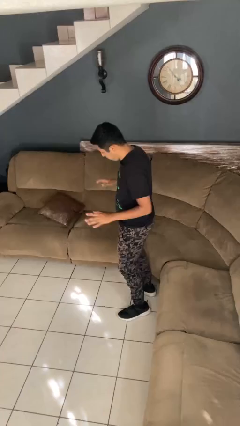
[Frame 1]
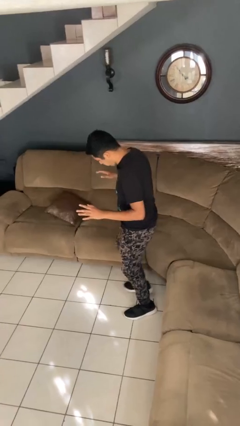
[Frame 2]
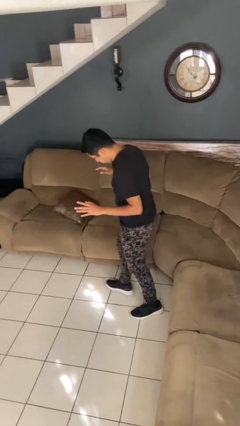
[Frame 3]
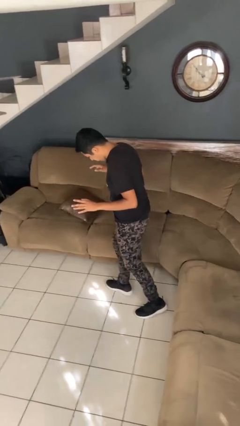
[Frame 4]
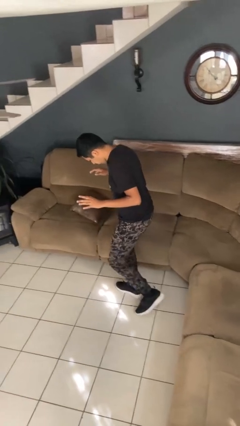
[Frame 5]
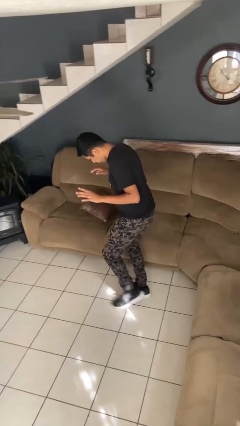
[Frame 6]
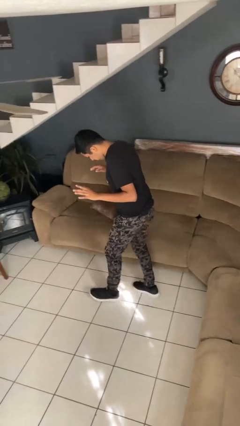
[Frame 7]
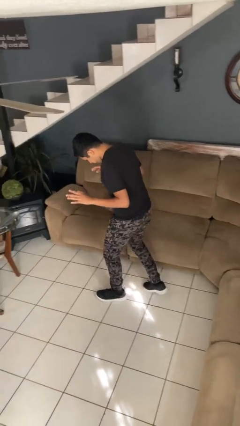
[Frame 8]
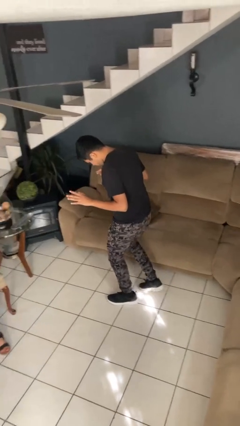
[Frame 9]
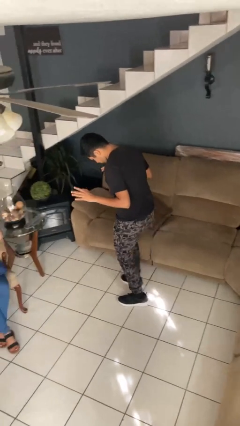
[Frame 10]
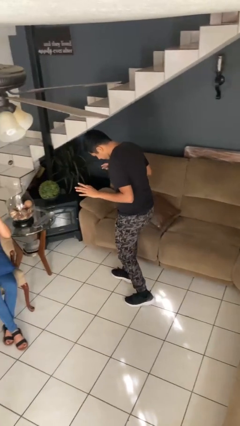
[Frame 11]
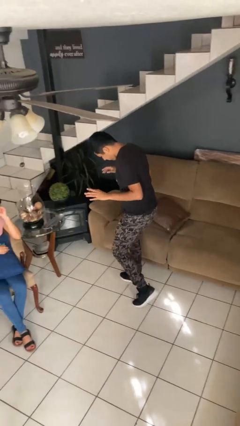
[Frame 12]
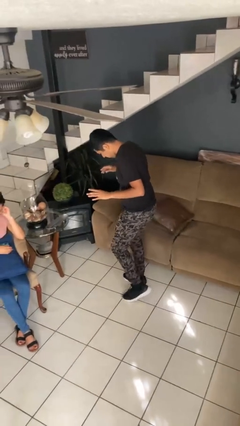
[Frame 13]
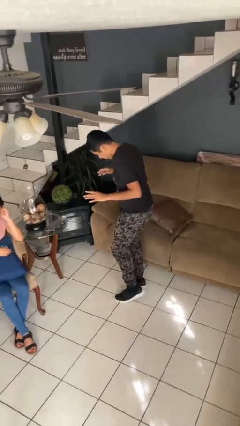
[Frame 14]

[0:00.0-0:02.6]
person walks tiptoe

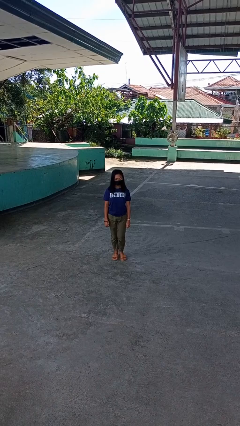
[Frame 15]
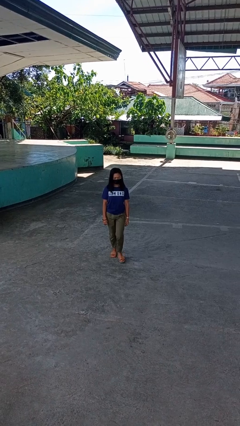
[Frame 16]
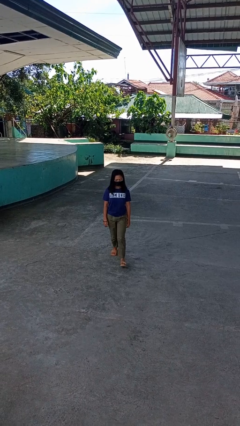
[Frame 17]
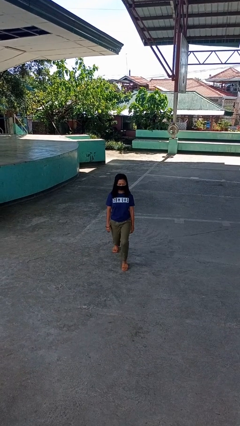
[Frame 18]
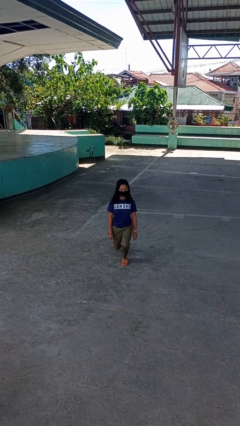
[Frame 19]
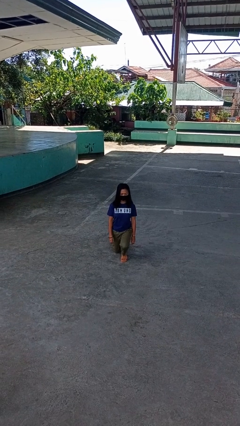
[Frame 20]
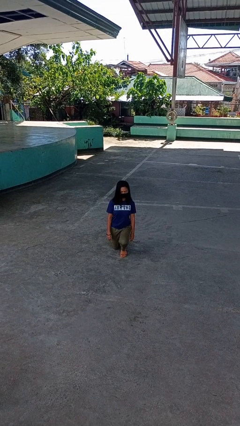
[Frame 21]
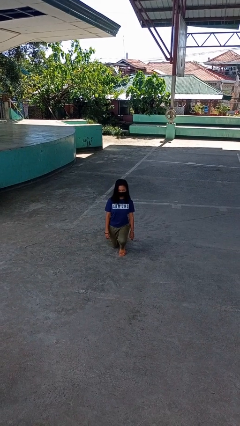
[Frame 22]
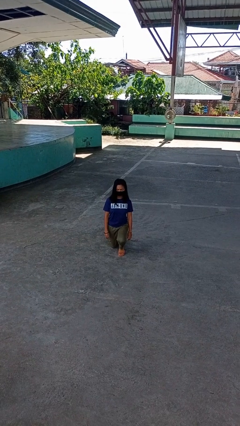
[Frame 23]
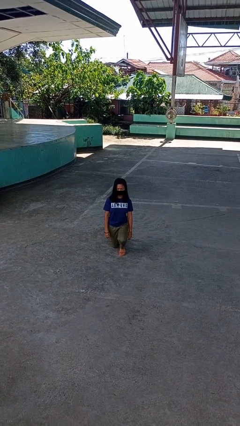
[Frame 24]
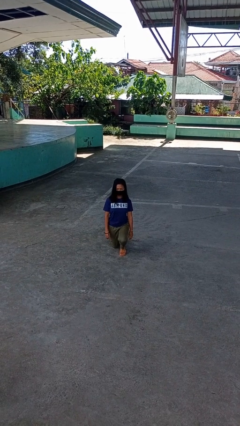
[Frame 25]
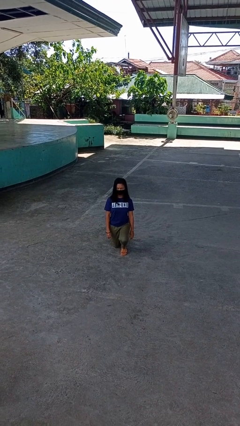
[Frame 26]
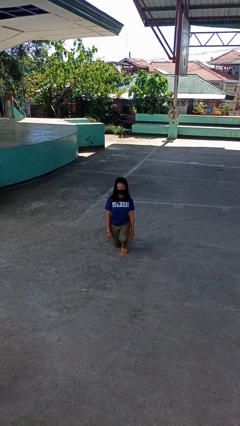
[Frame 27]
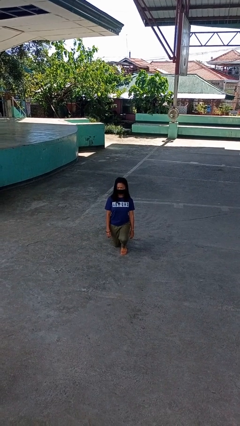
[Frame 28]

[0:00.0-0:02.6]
person kneels

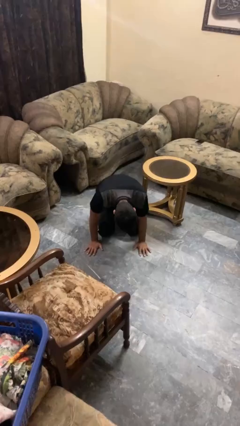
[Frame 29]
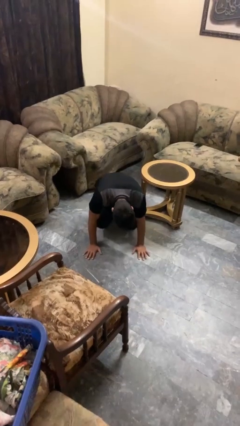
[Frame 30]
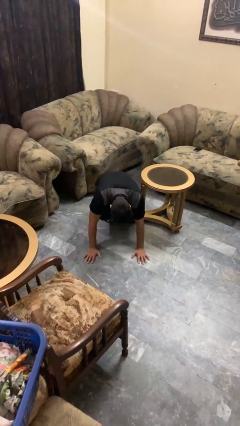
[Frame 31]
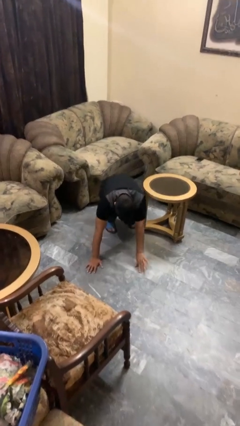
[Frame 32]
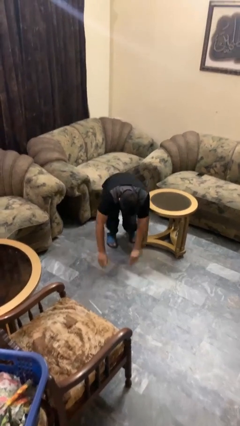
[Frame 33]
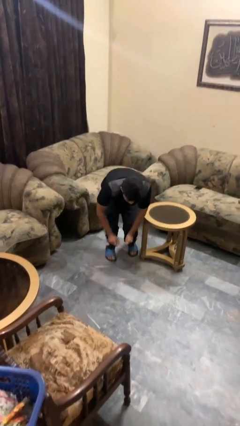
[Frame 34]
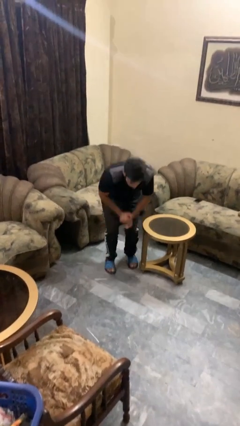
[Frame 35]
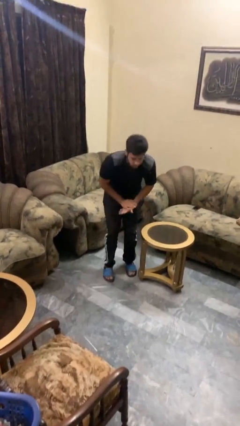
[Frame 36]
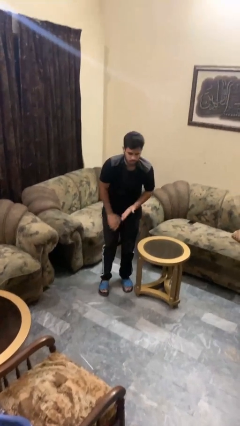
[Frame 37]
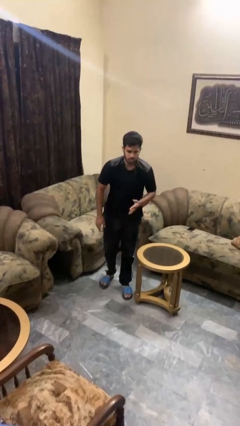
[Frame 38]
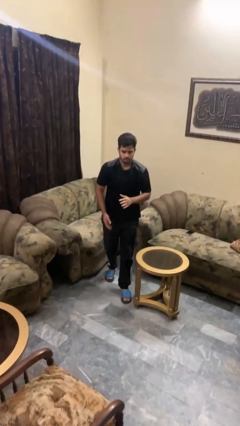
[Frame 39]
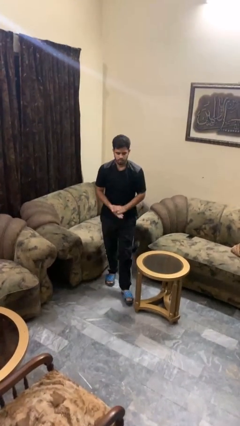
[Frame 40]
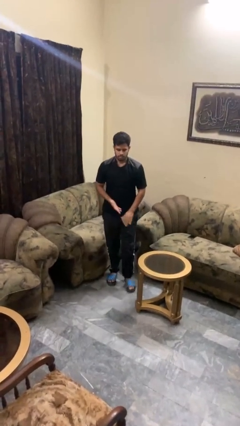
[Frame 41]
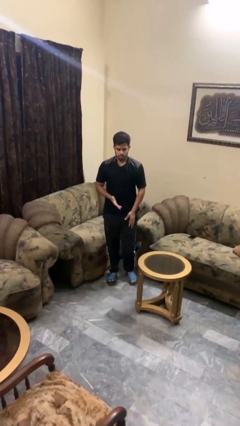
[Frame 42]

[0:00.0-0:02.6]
person stands up from floor

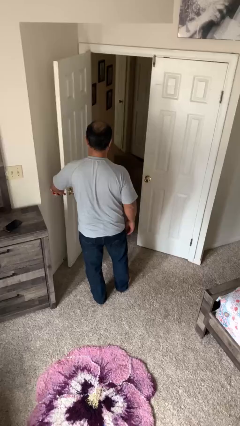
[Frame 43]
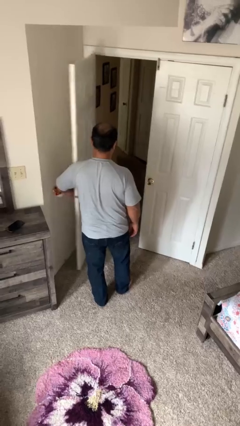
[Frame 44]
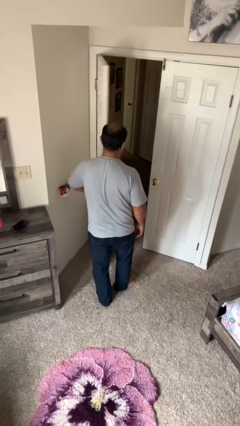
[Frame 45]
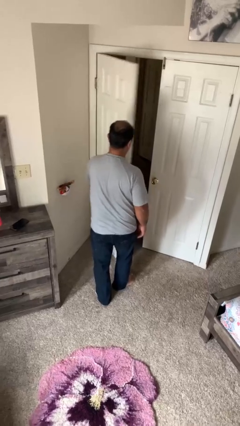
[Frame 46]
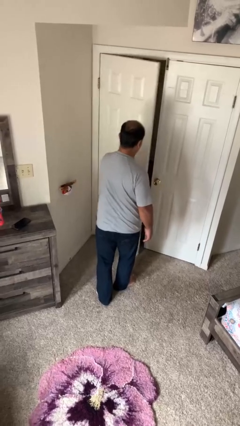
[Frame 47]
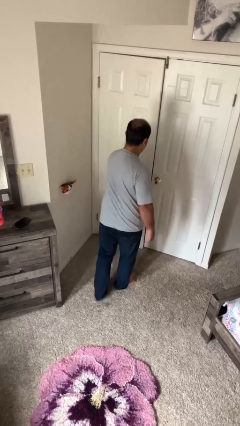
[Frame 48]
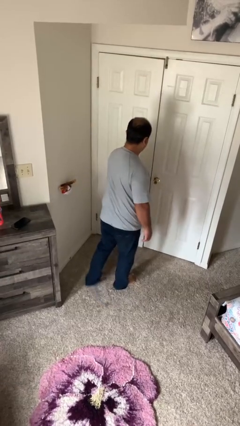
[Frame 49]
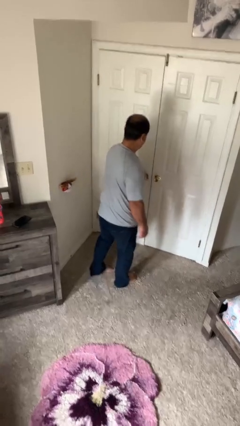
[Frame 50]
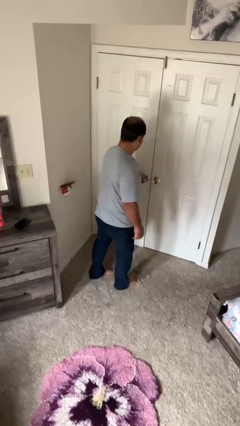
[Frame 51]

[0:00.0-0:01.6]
person closes facility door

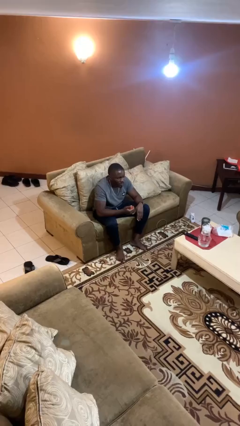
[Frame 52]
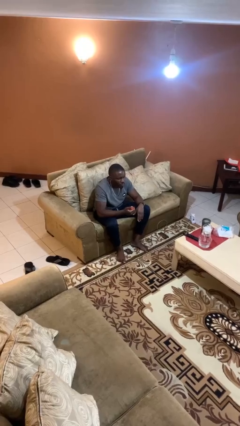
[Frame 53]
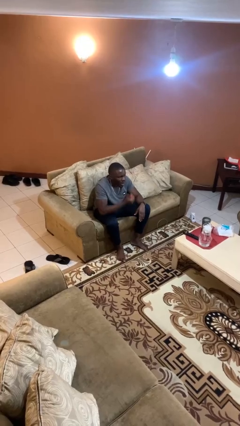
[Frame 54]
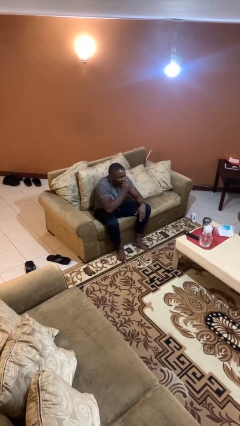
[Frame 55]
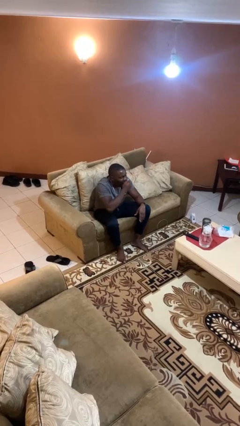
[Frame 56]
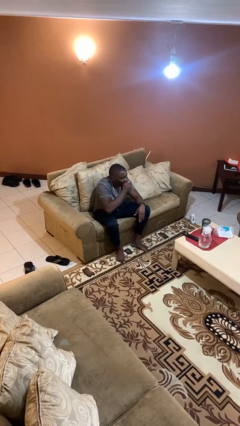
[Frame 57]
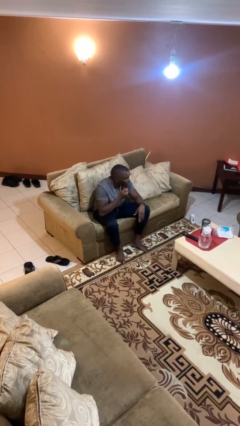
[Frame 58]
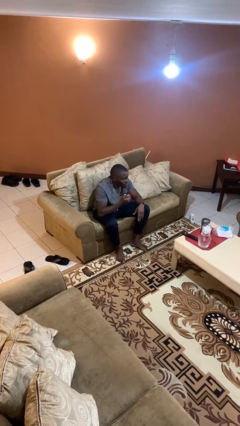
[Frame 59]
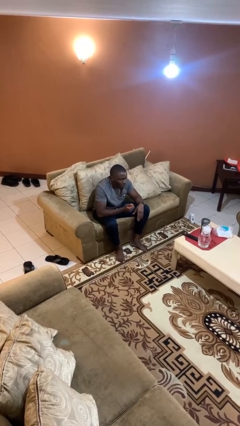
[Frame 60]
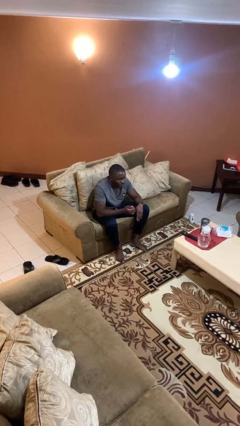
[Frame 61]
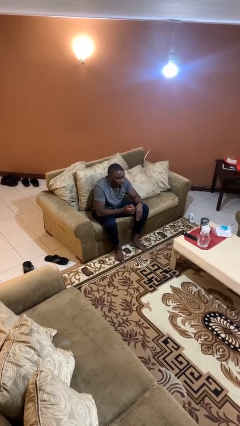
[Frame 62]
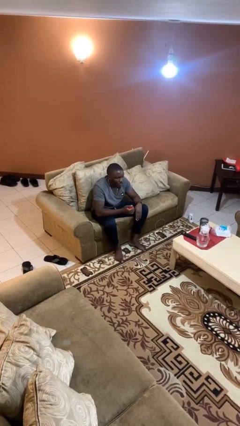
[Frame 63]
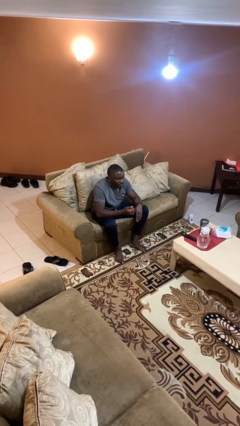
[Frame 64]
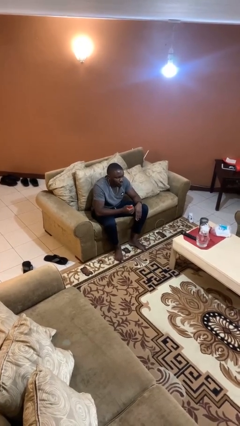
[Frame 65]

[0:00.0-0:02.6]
person eats apple

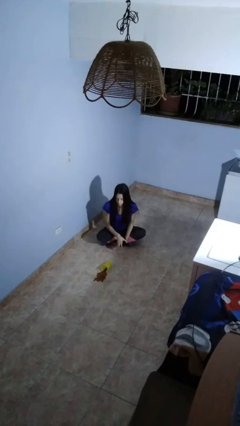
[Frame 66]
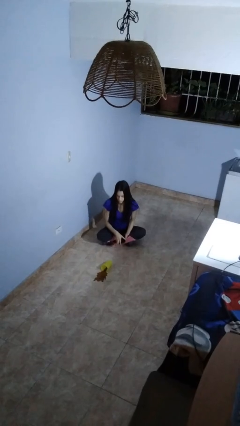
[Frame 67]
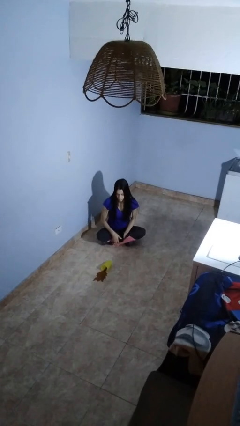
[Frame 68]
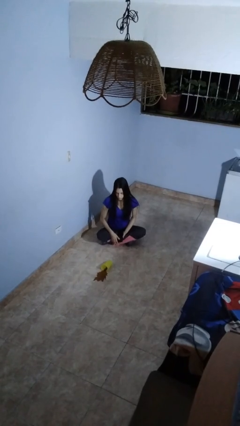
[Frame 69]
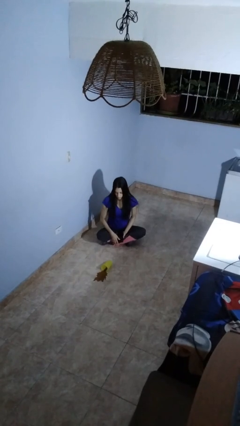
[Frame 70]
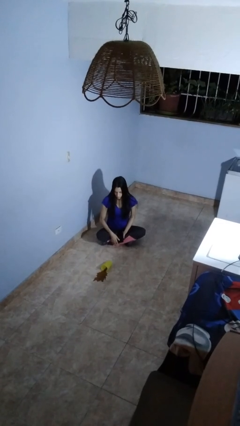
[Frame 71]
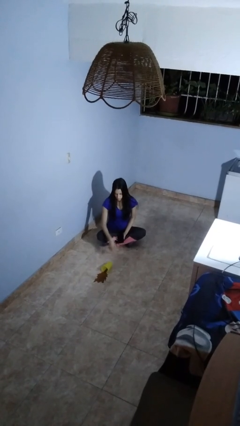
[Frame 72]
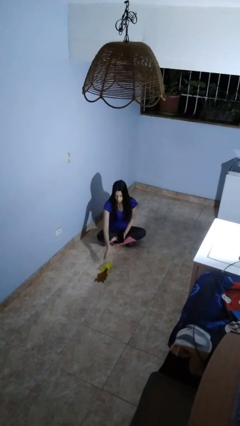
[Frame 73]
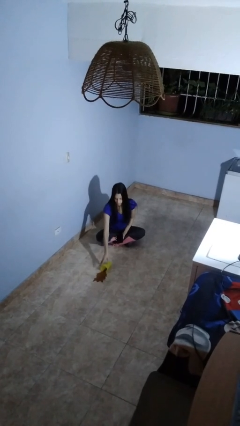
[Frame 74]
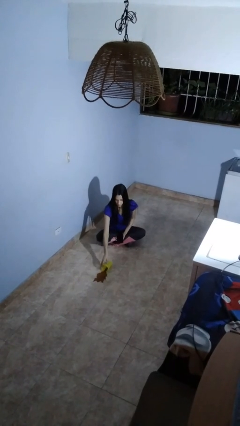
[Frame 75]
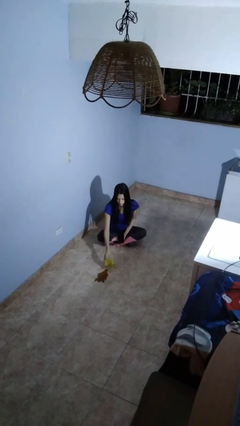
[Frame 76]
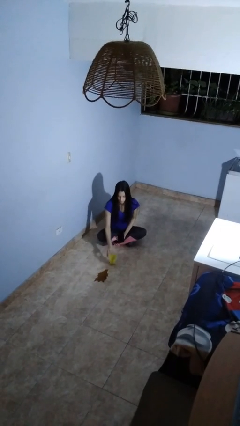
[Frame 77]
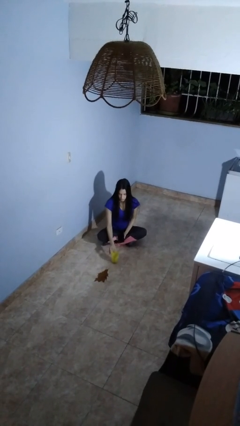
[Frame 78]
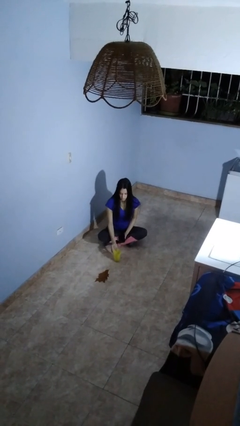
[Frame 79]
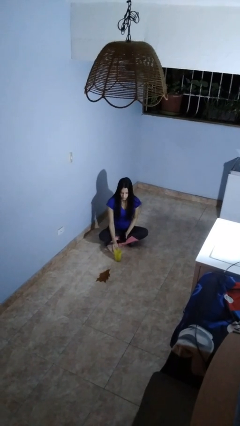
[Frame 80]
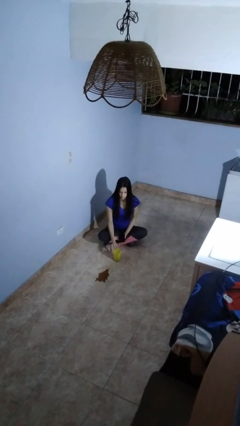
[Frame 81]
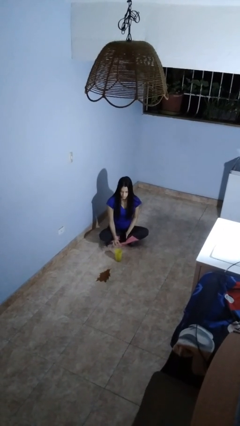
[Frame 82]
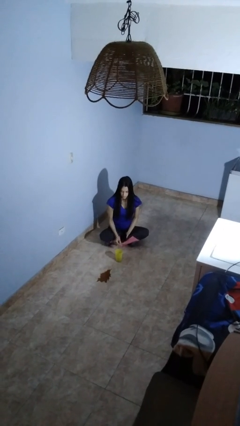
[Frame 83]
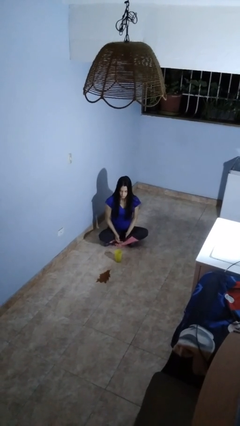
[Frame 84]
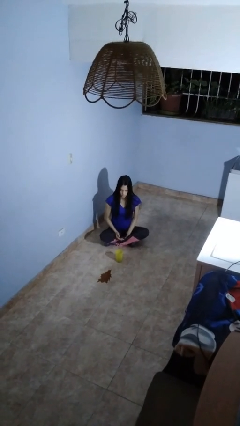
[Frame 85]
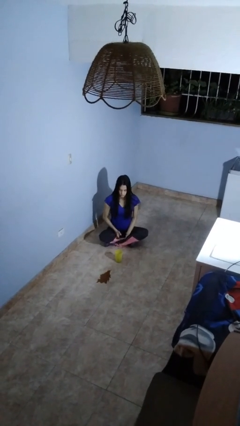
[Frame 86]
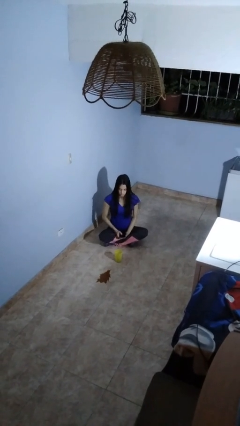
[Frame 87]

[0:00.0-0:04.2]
person sets upright glass

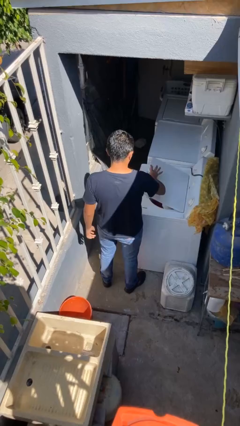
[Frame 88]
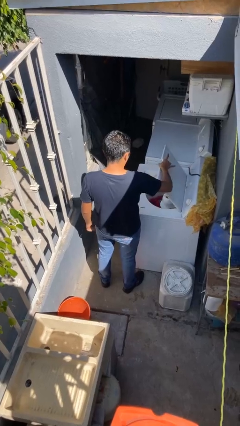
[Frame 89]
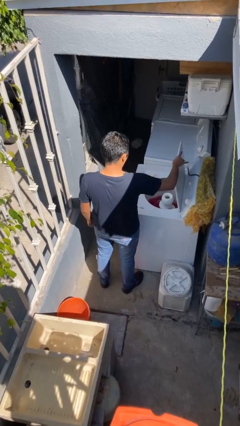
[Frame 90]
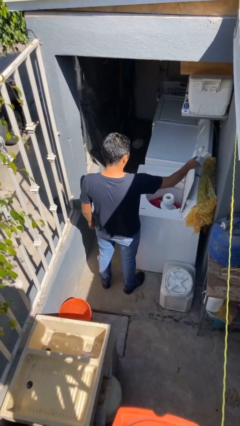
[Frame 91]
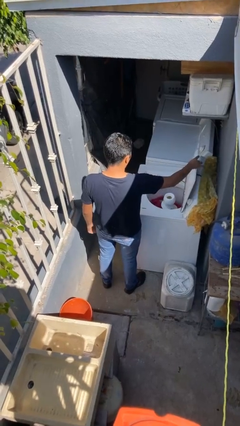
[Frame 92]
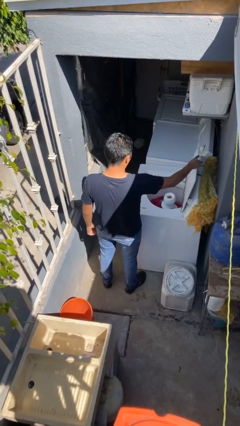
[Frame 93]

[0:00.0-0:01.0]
person opens clothes washer
